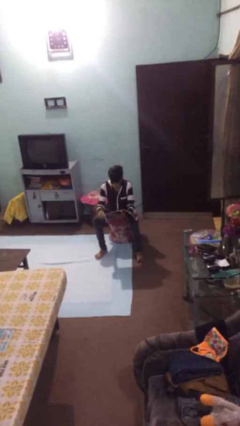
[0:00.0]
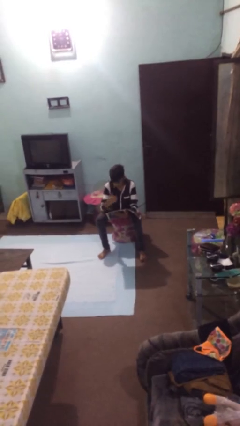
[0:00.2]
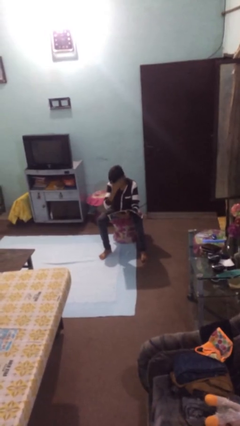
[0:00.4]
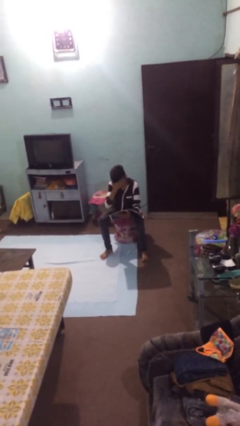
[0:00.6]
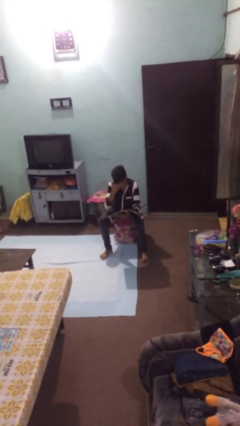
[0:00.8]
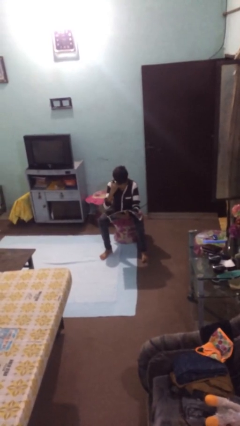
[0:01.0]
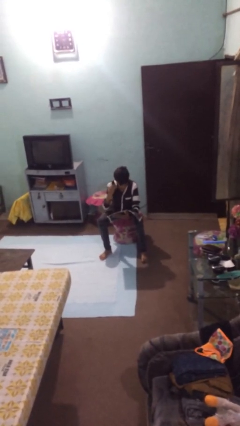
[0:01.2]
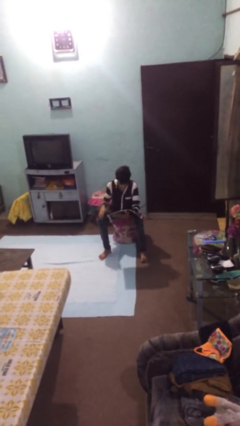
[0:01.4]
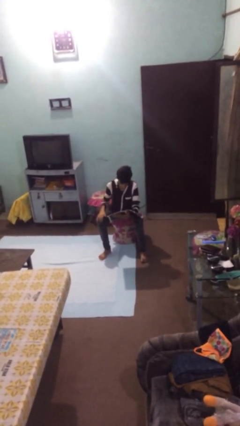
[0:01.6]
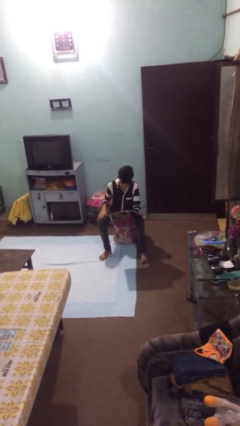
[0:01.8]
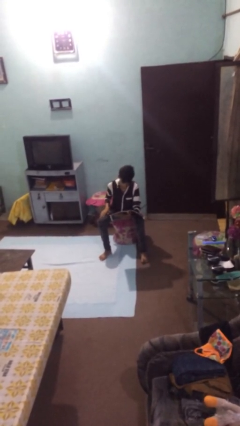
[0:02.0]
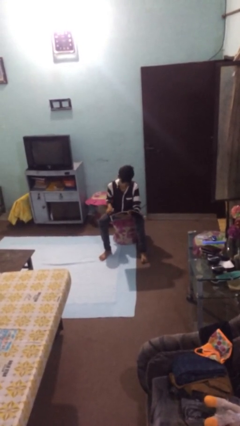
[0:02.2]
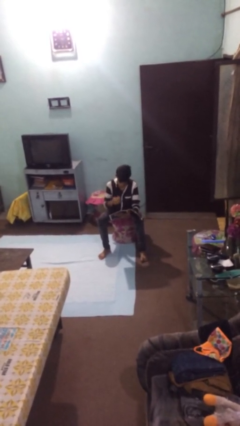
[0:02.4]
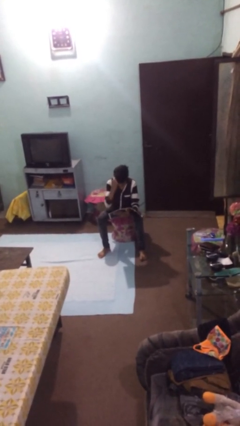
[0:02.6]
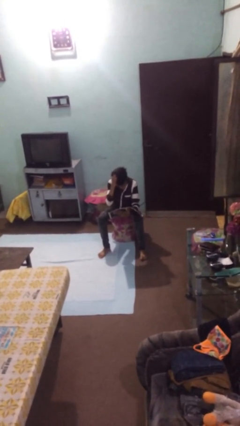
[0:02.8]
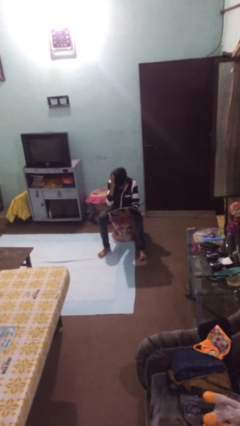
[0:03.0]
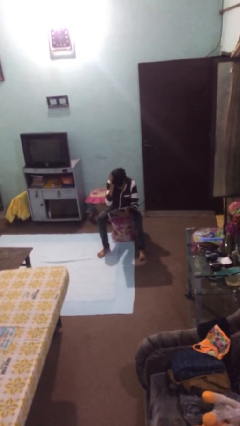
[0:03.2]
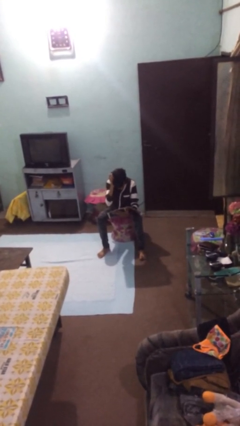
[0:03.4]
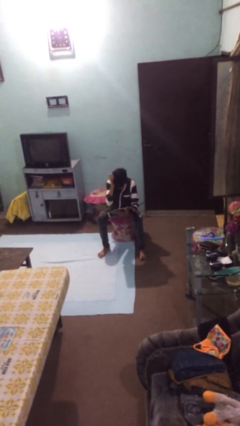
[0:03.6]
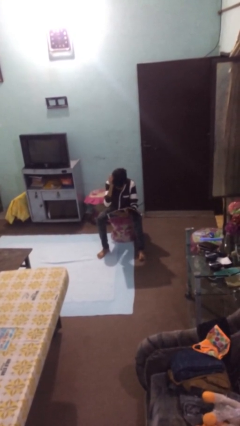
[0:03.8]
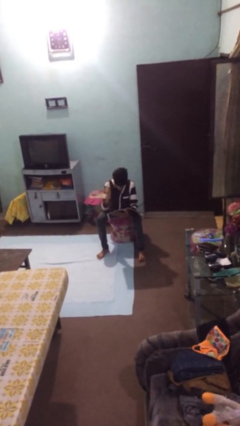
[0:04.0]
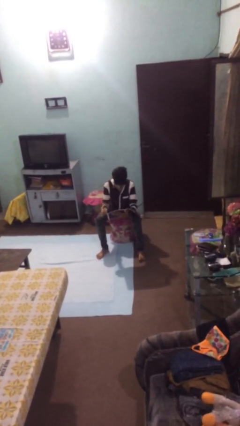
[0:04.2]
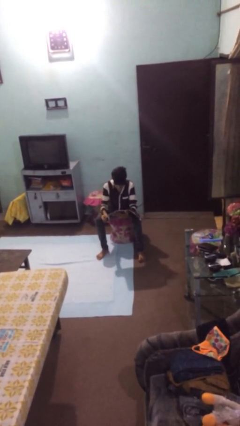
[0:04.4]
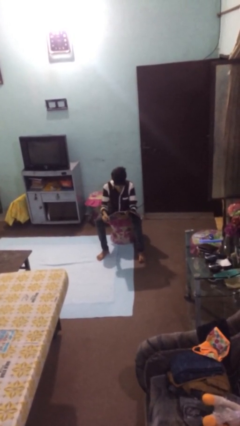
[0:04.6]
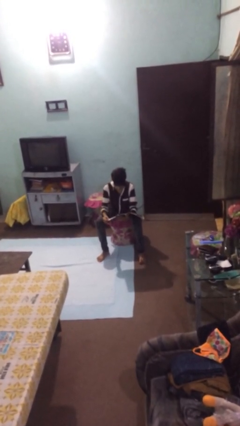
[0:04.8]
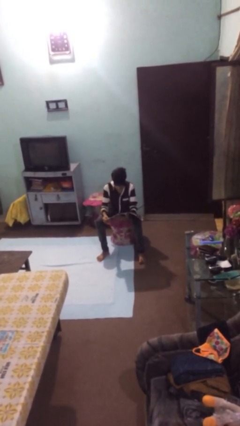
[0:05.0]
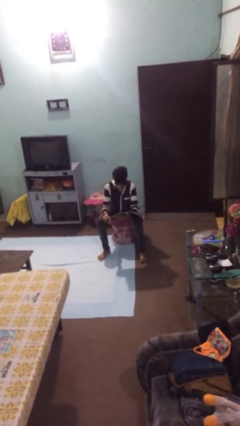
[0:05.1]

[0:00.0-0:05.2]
person reads document

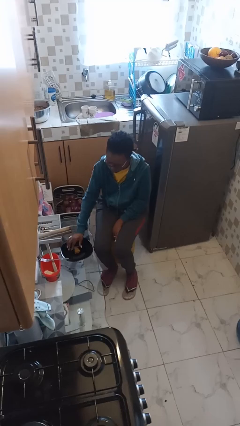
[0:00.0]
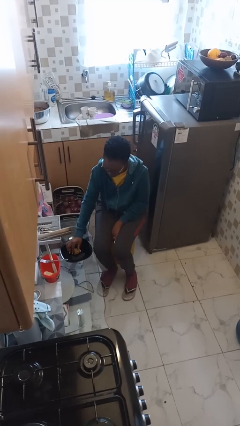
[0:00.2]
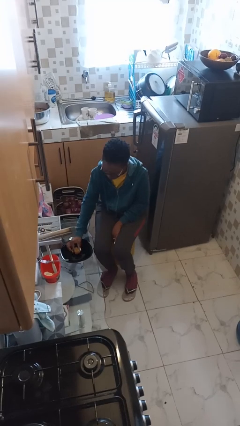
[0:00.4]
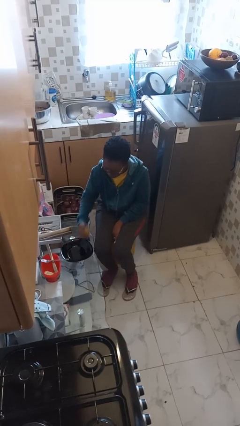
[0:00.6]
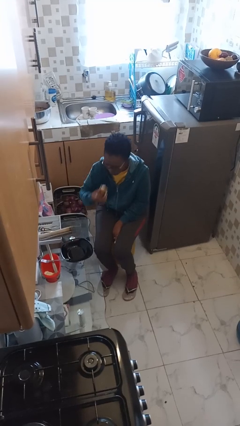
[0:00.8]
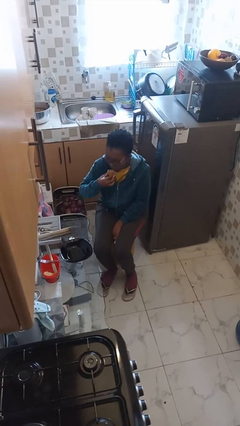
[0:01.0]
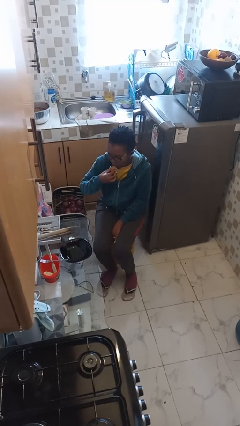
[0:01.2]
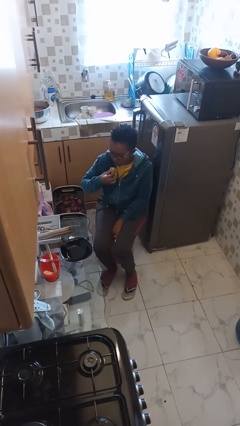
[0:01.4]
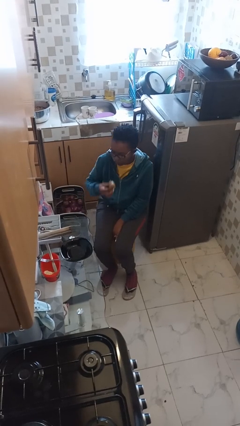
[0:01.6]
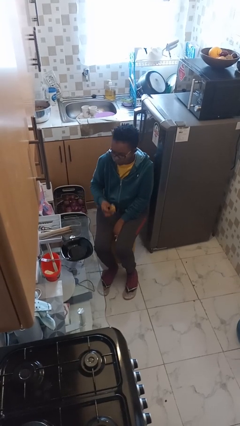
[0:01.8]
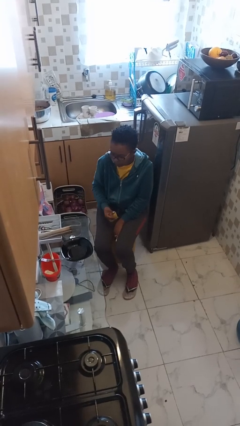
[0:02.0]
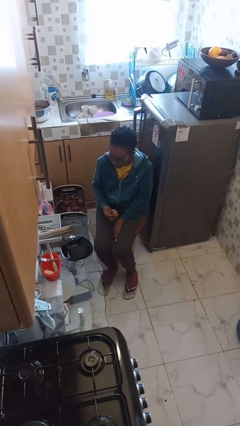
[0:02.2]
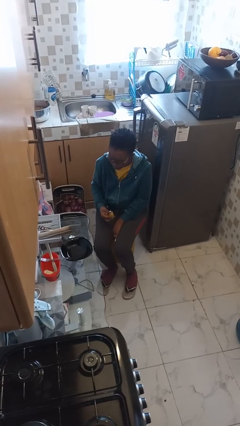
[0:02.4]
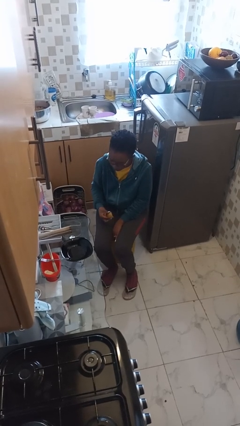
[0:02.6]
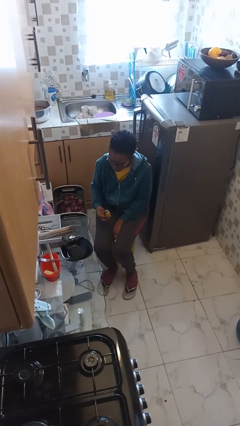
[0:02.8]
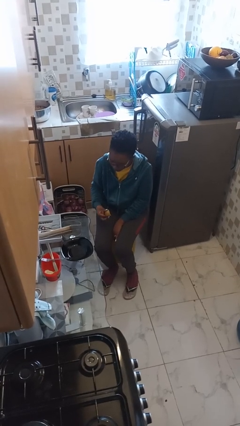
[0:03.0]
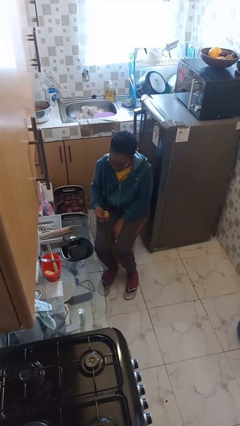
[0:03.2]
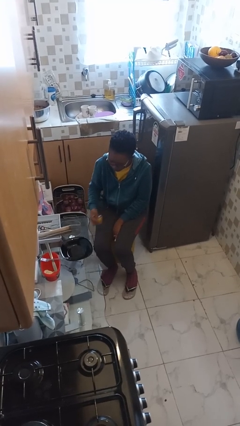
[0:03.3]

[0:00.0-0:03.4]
person eats with hands

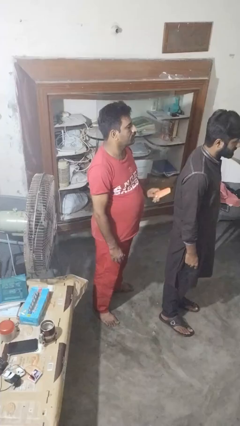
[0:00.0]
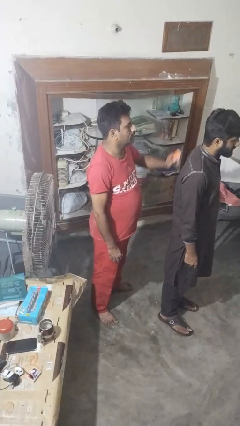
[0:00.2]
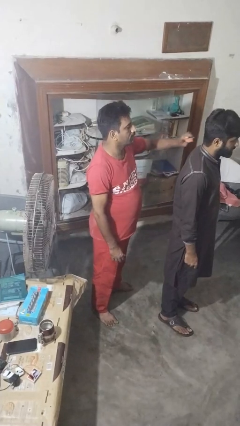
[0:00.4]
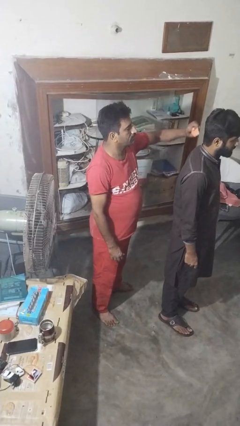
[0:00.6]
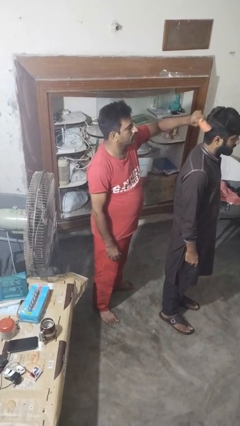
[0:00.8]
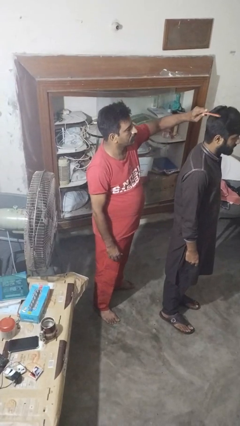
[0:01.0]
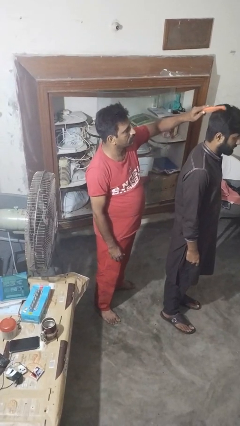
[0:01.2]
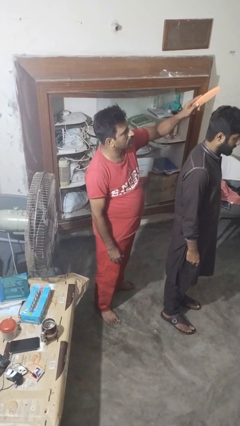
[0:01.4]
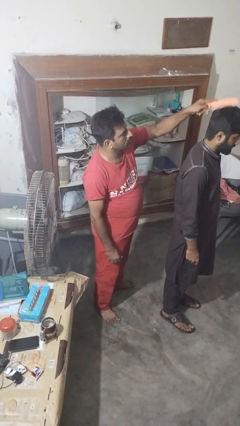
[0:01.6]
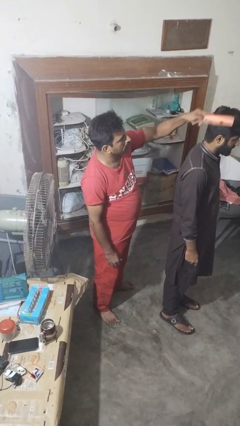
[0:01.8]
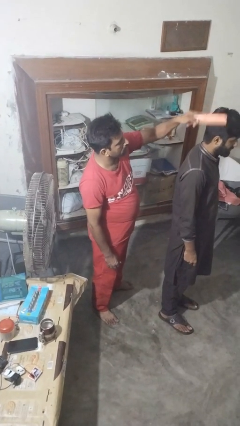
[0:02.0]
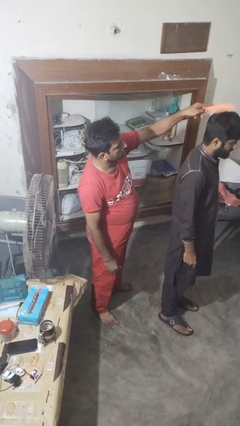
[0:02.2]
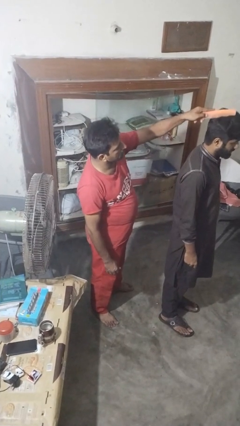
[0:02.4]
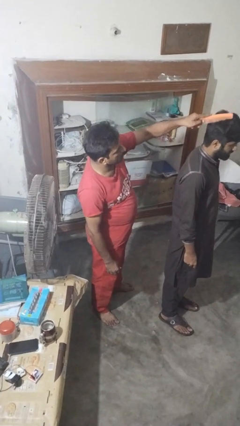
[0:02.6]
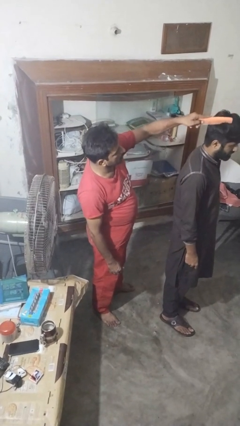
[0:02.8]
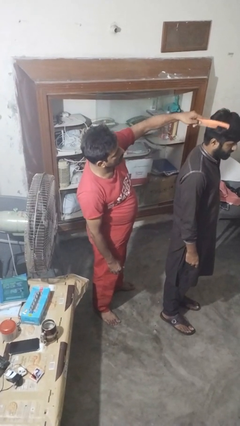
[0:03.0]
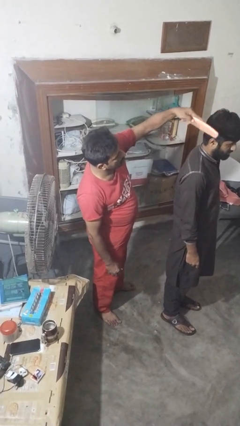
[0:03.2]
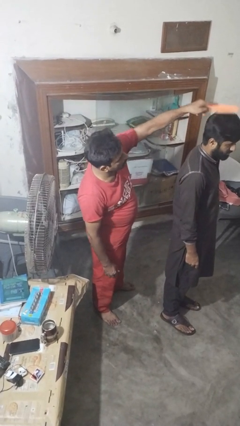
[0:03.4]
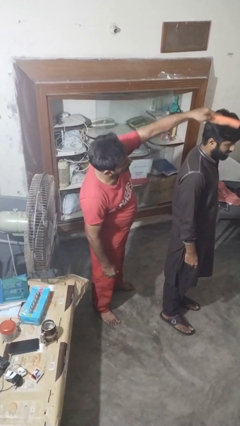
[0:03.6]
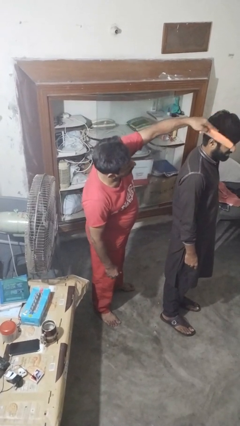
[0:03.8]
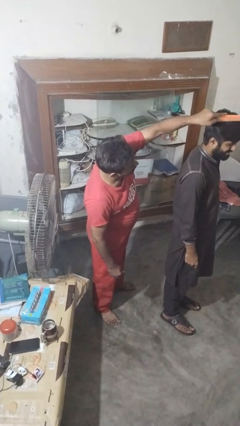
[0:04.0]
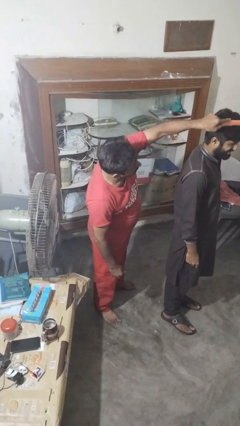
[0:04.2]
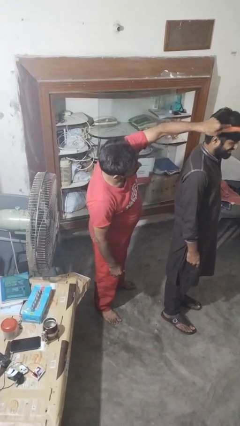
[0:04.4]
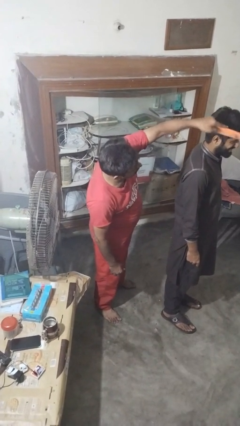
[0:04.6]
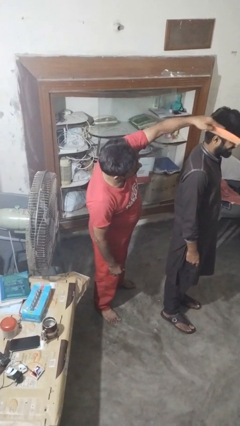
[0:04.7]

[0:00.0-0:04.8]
person brushes hair of person

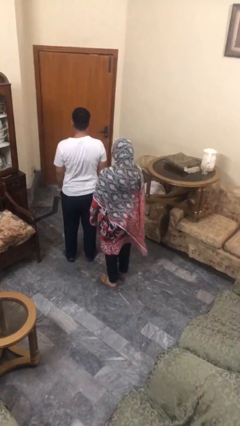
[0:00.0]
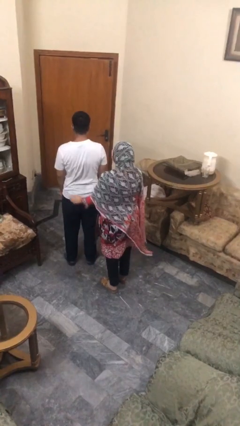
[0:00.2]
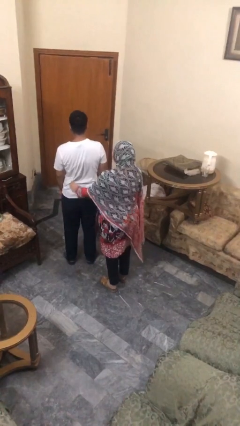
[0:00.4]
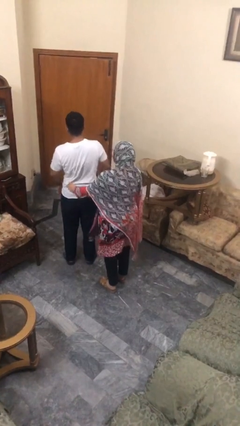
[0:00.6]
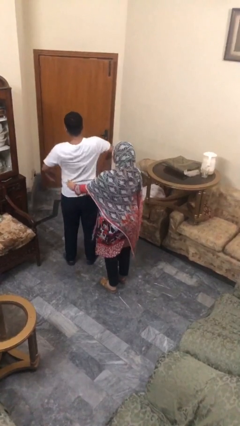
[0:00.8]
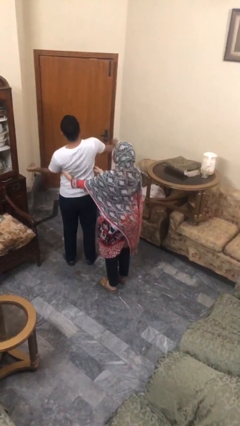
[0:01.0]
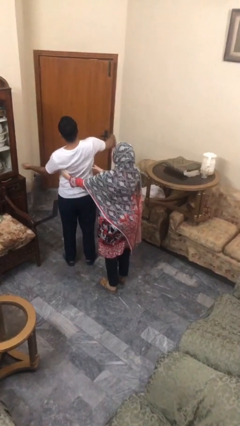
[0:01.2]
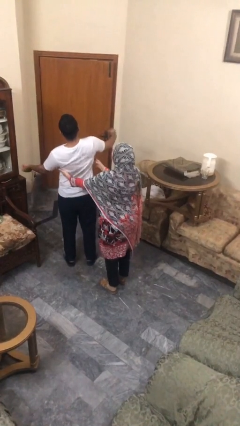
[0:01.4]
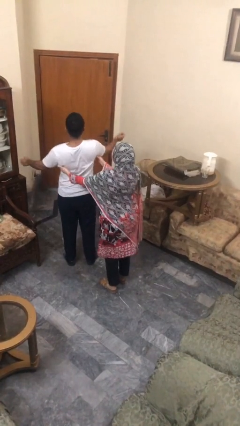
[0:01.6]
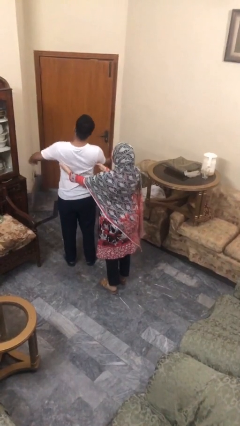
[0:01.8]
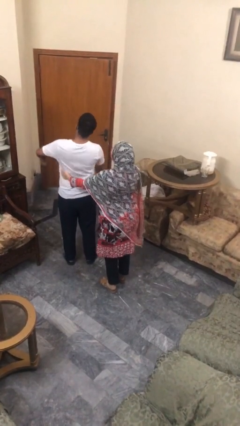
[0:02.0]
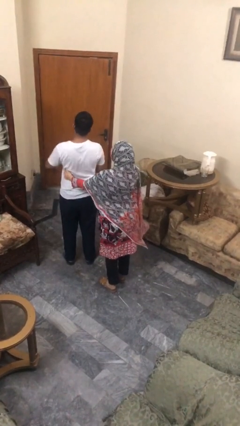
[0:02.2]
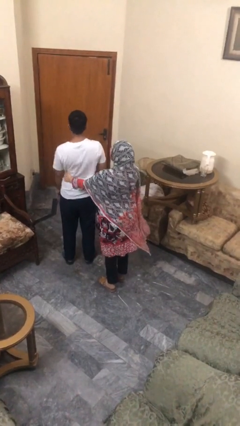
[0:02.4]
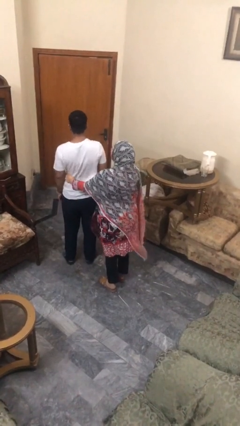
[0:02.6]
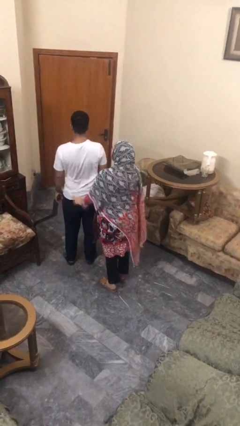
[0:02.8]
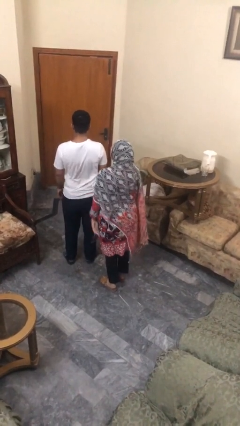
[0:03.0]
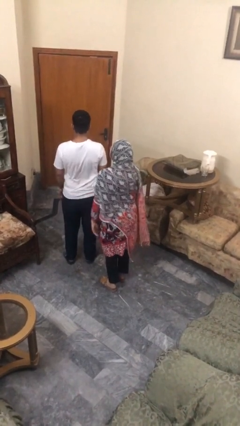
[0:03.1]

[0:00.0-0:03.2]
person tickles person

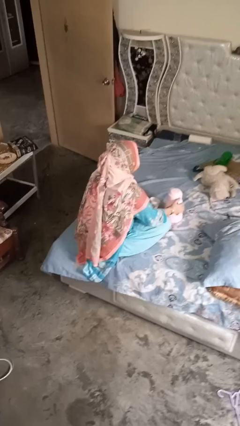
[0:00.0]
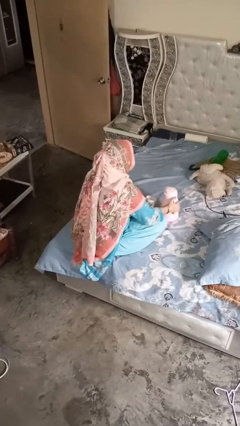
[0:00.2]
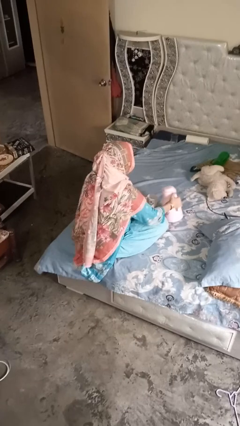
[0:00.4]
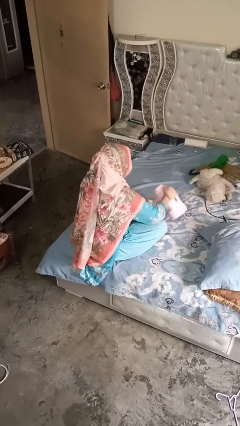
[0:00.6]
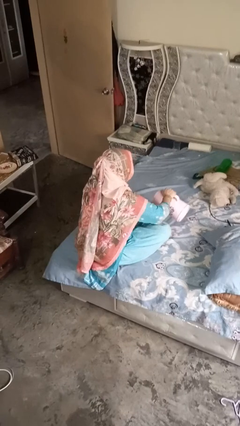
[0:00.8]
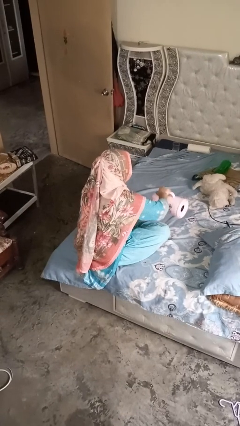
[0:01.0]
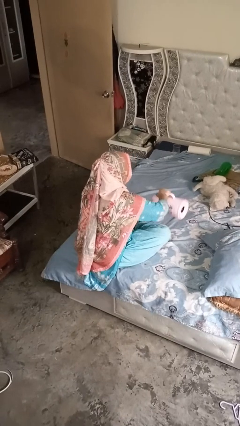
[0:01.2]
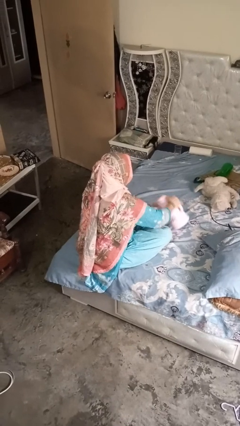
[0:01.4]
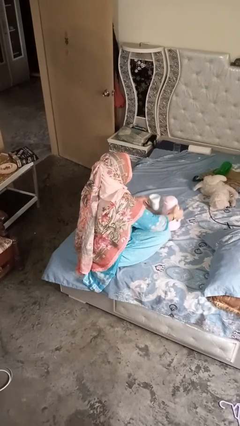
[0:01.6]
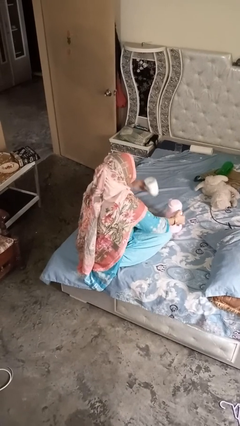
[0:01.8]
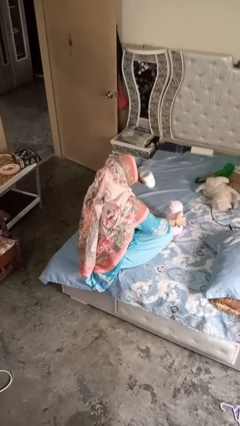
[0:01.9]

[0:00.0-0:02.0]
person pours coffee into mug
